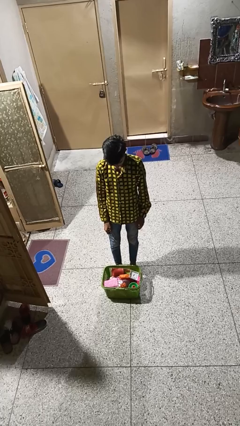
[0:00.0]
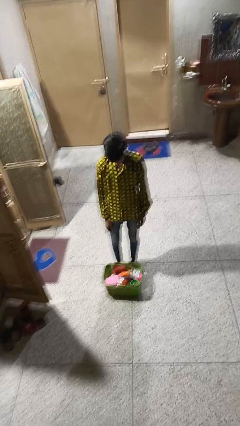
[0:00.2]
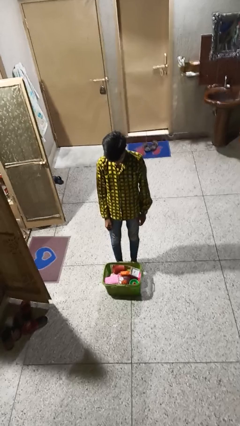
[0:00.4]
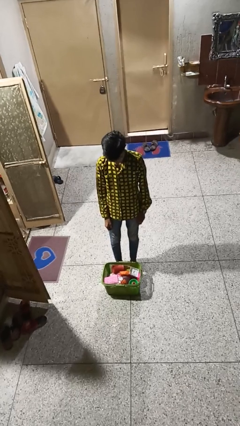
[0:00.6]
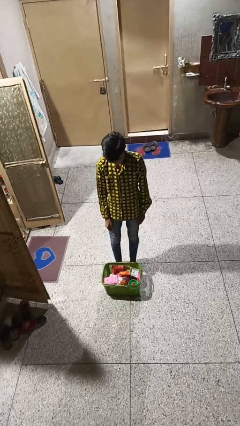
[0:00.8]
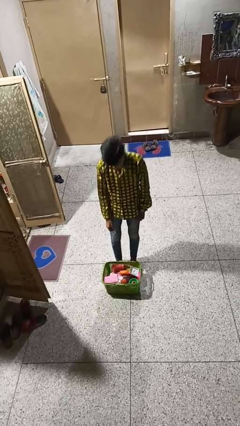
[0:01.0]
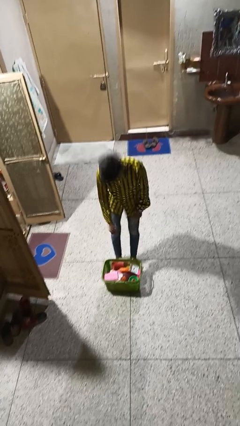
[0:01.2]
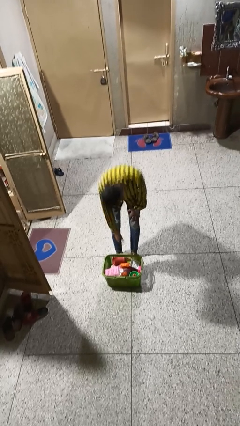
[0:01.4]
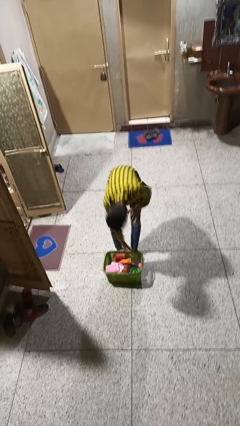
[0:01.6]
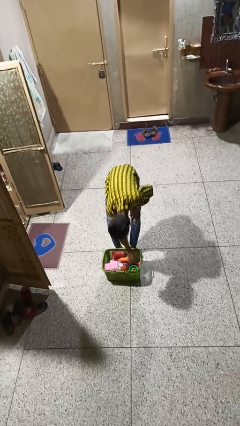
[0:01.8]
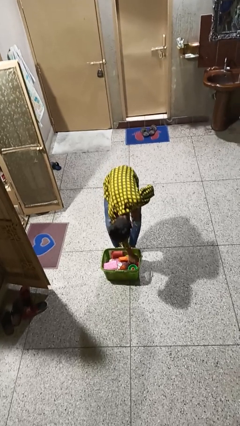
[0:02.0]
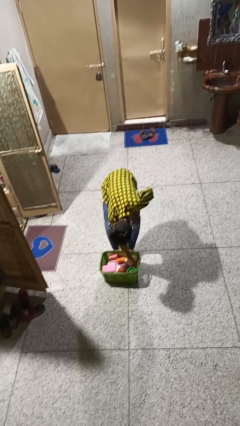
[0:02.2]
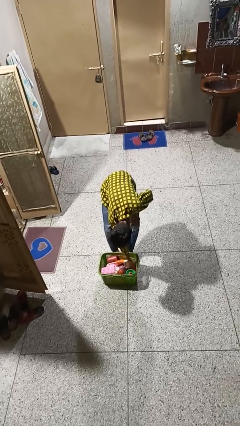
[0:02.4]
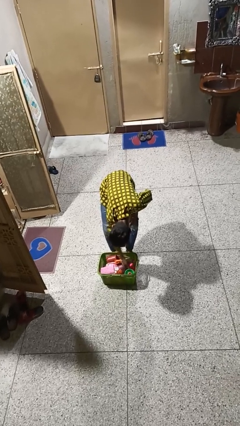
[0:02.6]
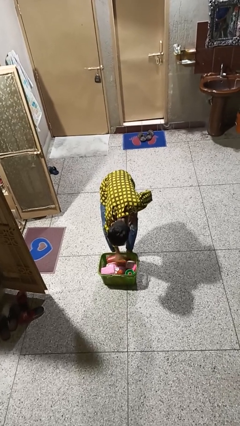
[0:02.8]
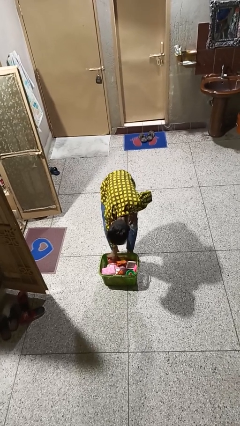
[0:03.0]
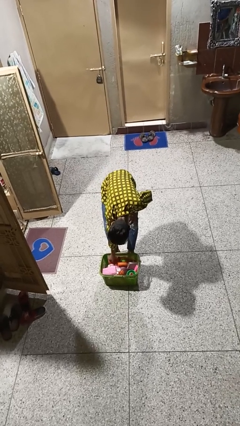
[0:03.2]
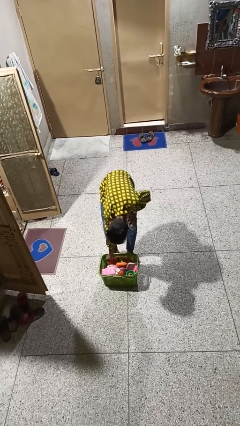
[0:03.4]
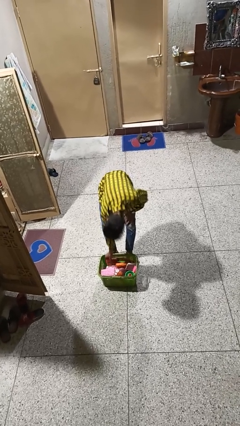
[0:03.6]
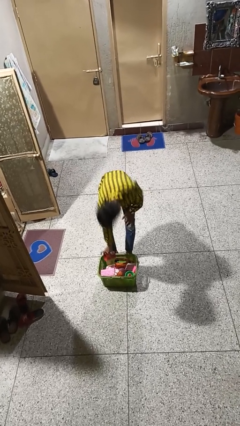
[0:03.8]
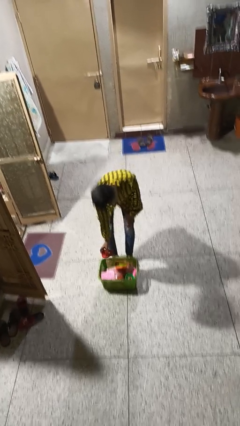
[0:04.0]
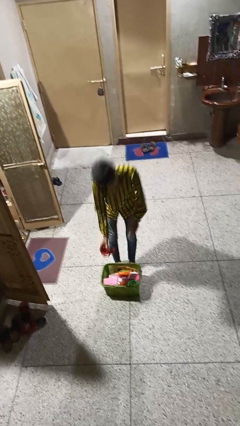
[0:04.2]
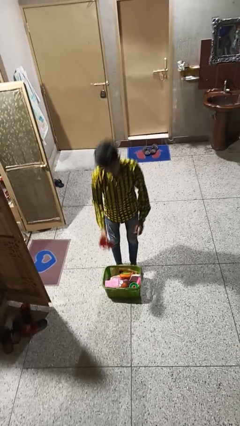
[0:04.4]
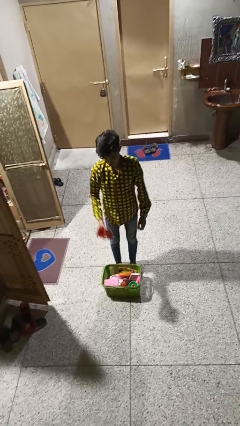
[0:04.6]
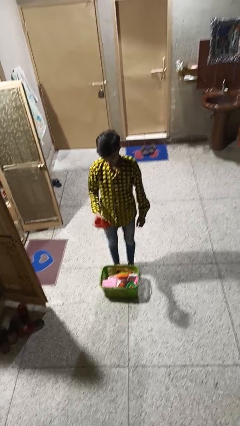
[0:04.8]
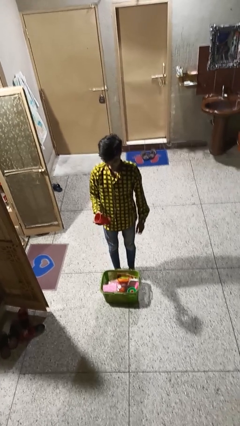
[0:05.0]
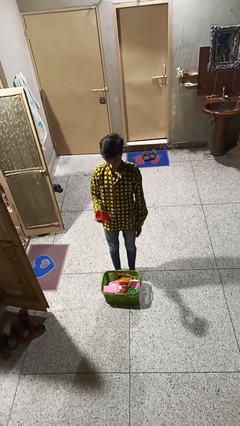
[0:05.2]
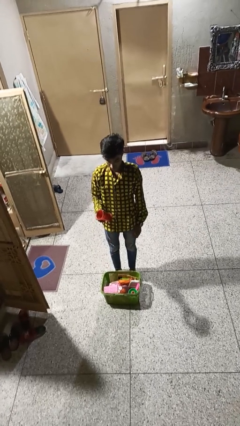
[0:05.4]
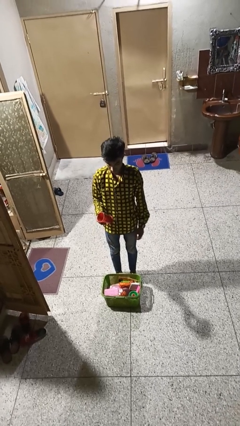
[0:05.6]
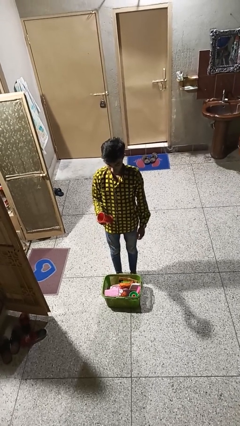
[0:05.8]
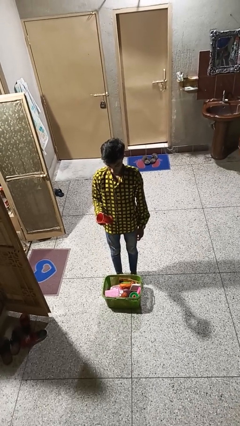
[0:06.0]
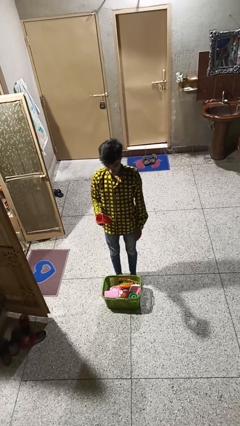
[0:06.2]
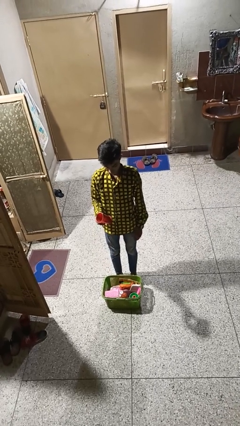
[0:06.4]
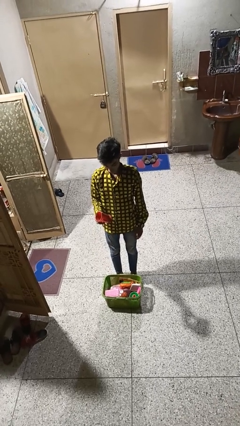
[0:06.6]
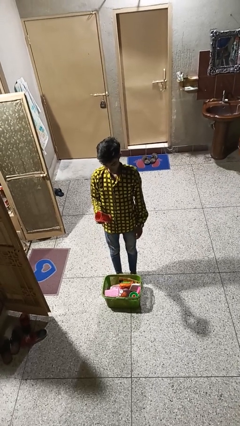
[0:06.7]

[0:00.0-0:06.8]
person puts object into basket

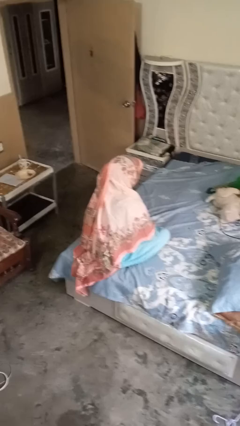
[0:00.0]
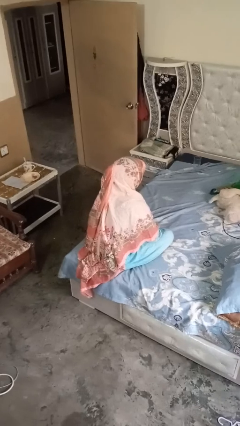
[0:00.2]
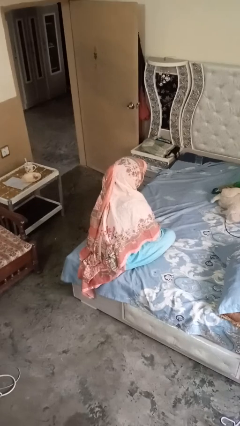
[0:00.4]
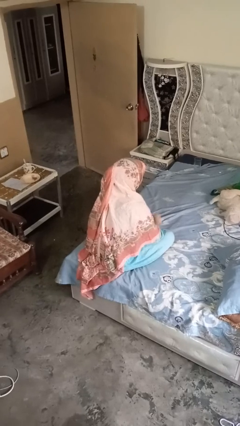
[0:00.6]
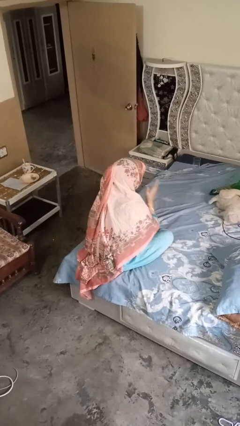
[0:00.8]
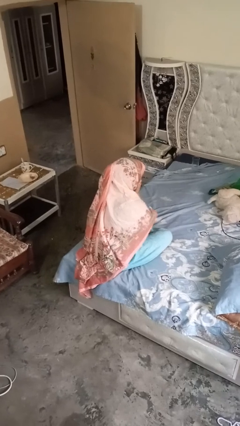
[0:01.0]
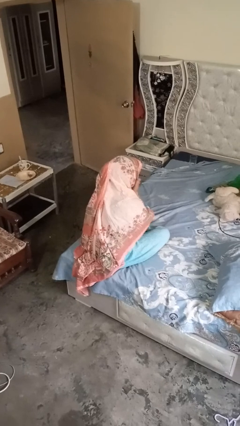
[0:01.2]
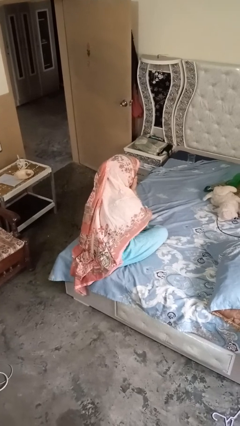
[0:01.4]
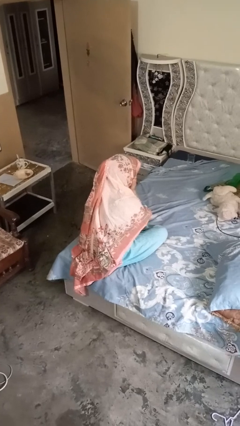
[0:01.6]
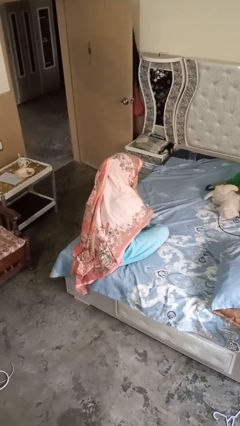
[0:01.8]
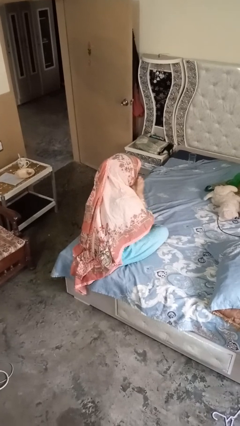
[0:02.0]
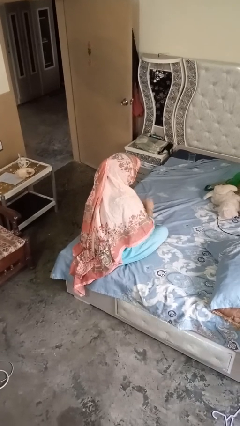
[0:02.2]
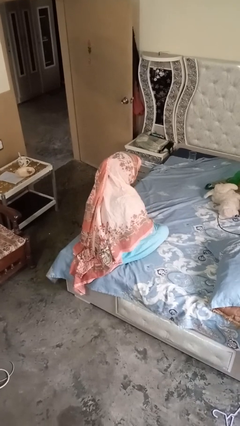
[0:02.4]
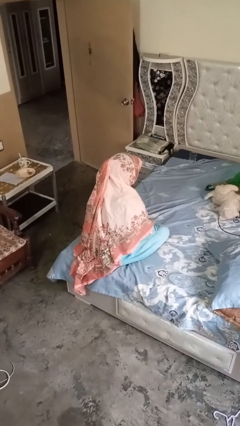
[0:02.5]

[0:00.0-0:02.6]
person strokes chin

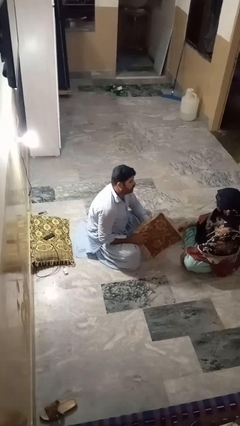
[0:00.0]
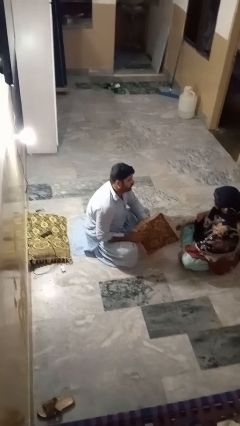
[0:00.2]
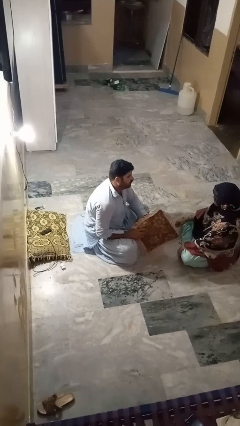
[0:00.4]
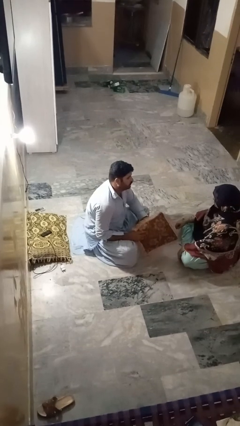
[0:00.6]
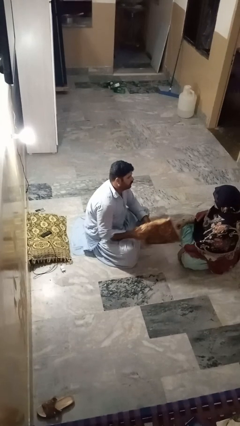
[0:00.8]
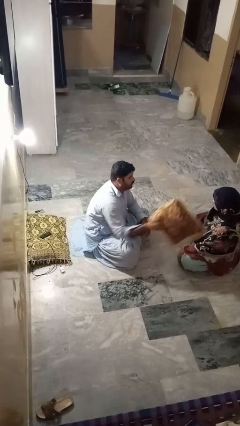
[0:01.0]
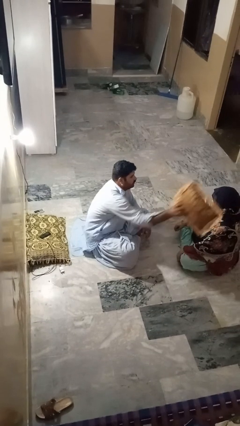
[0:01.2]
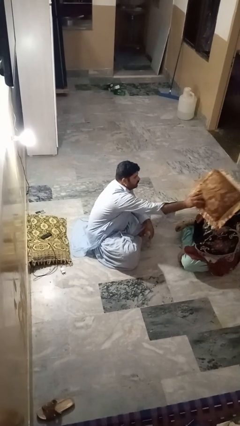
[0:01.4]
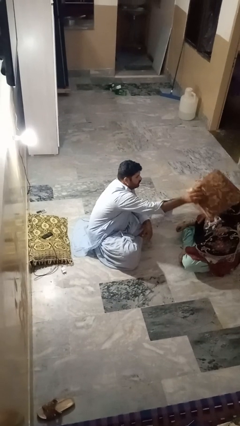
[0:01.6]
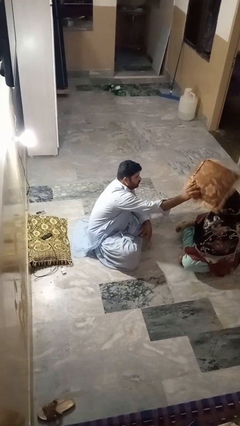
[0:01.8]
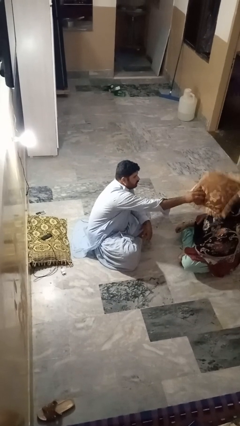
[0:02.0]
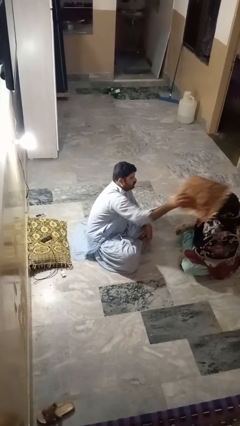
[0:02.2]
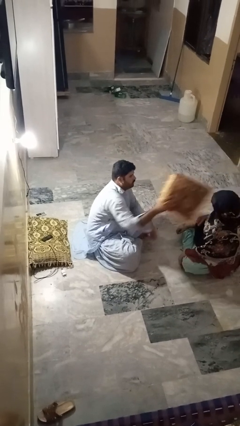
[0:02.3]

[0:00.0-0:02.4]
person hits person with pillow

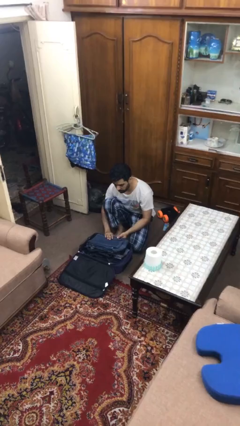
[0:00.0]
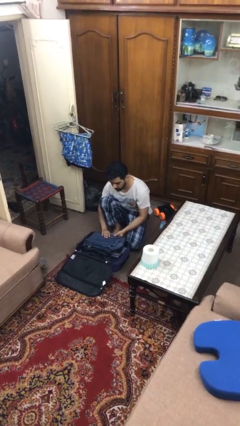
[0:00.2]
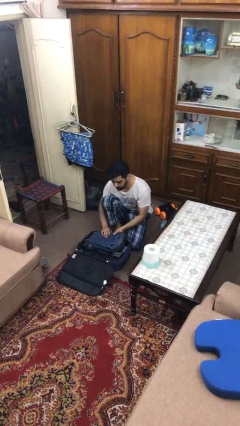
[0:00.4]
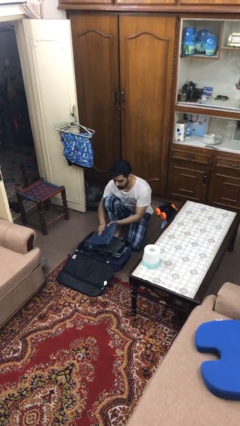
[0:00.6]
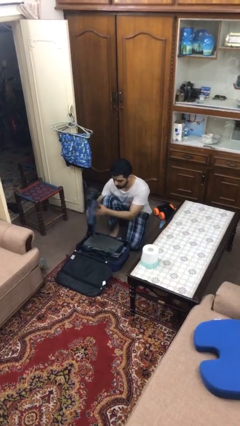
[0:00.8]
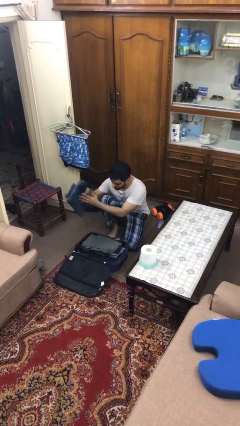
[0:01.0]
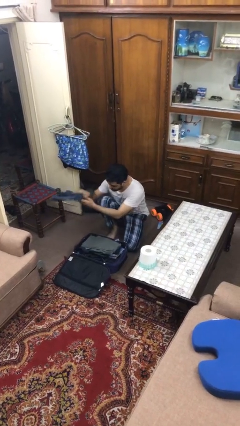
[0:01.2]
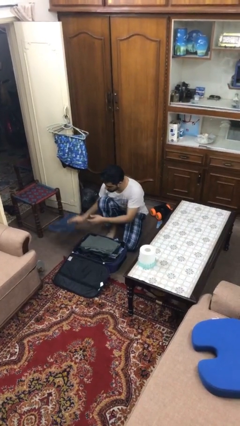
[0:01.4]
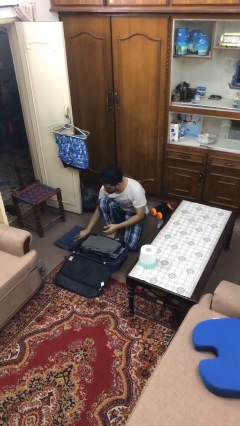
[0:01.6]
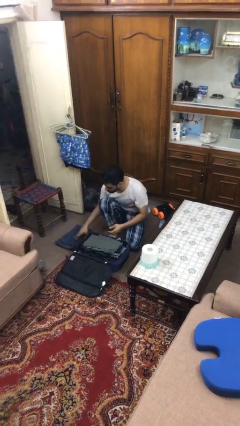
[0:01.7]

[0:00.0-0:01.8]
person unloads clothes from suitcase

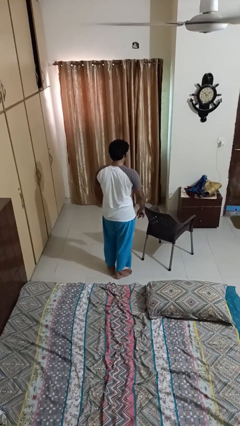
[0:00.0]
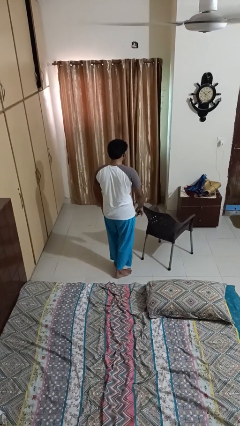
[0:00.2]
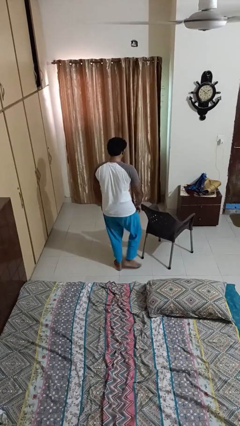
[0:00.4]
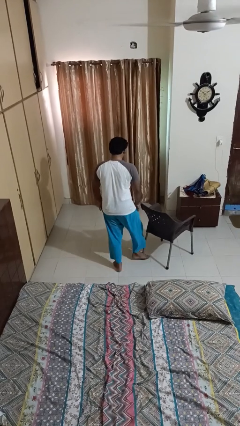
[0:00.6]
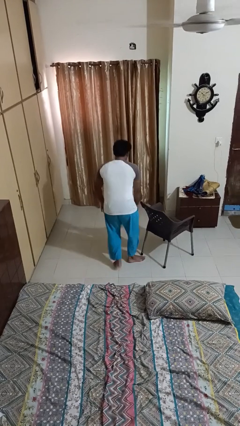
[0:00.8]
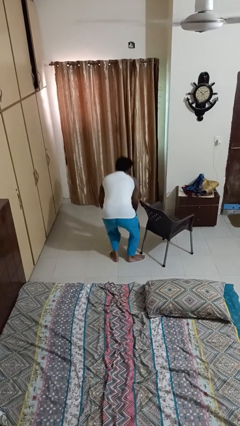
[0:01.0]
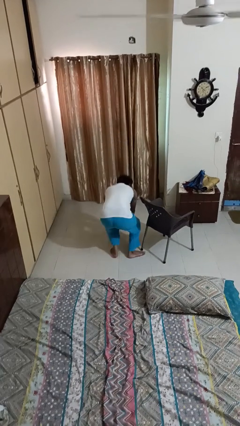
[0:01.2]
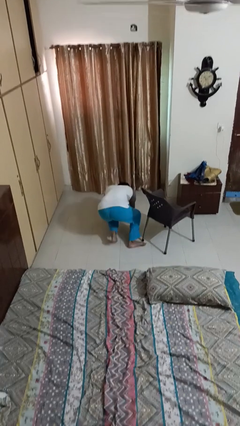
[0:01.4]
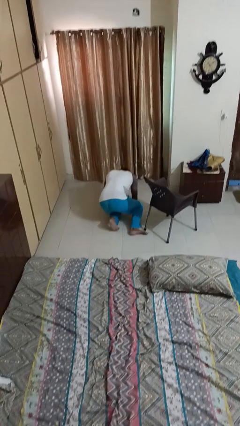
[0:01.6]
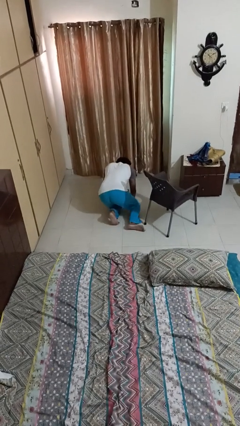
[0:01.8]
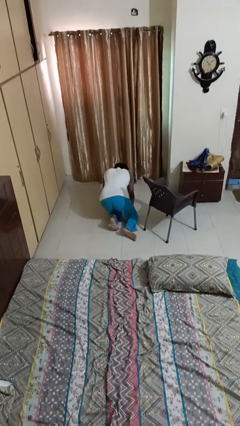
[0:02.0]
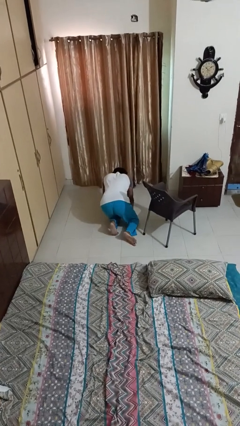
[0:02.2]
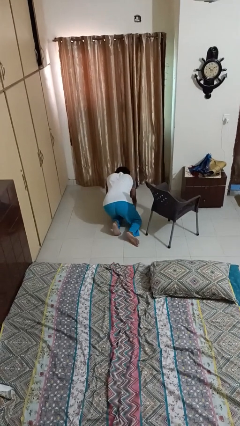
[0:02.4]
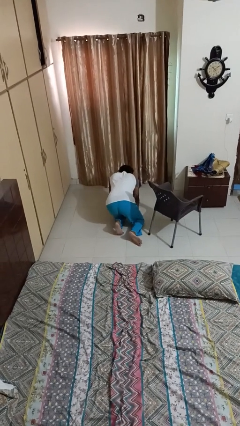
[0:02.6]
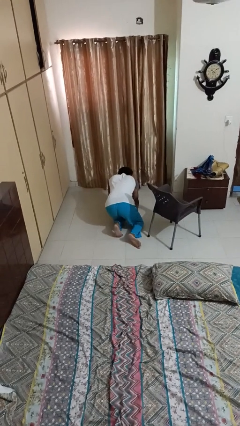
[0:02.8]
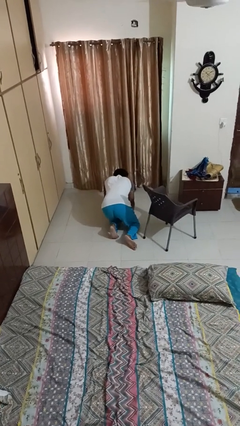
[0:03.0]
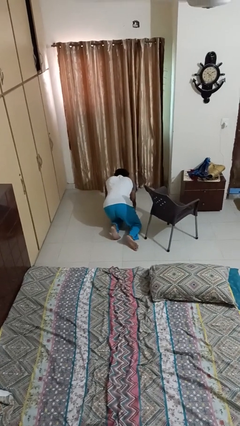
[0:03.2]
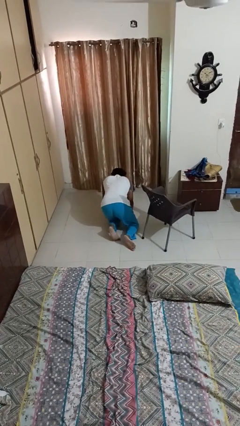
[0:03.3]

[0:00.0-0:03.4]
person trips on object on floor

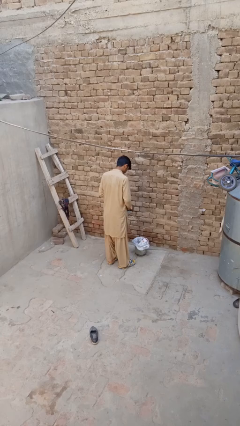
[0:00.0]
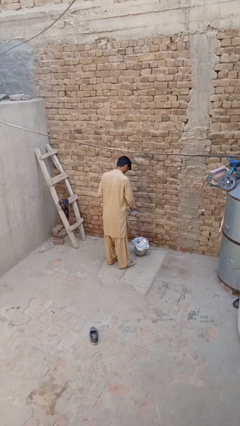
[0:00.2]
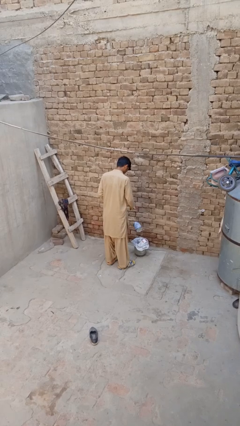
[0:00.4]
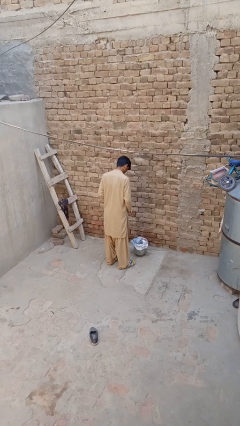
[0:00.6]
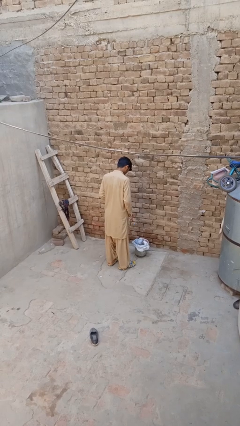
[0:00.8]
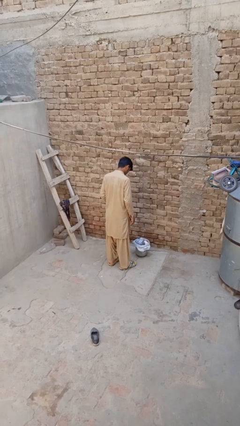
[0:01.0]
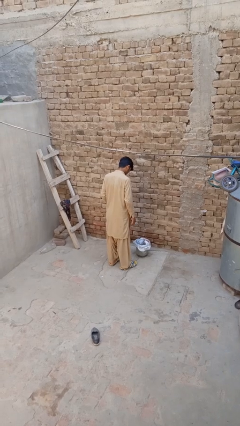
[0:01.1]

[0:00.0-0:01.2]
person discards trash
